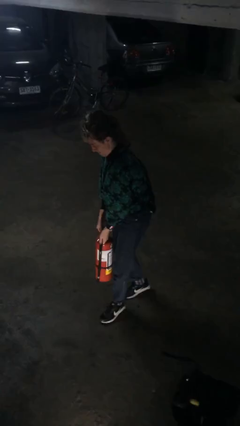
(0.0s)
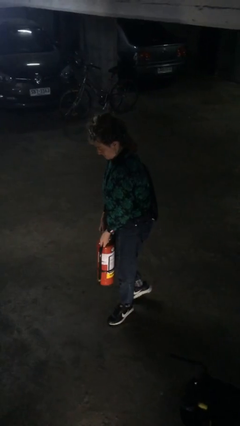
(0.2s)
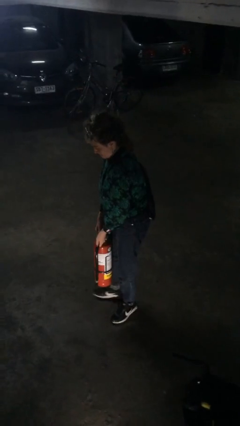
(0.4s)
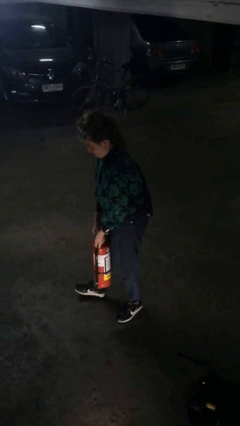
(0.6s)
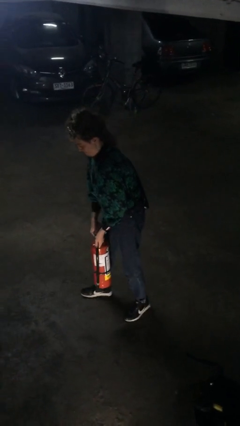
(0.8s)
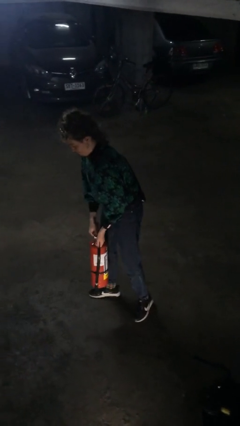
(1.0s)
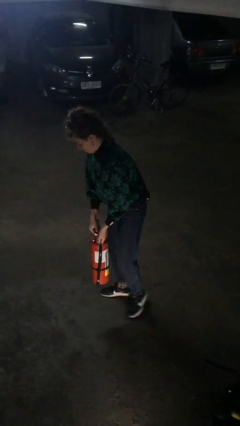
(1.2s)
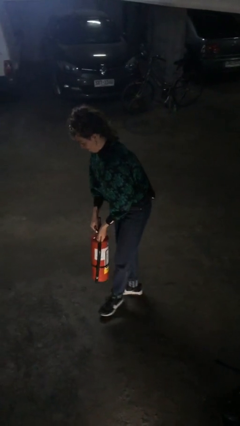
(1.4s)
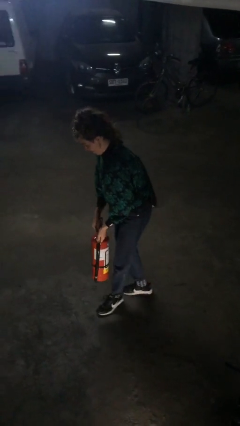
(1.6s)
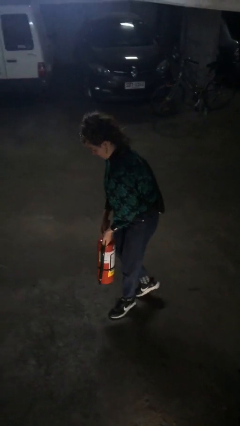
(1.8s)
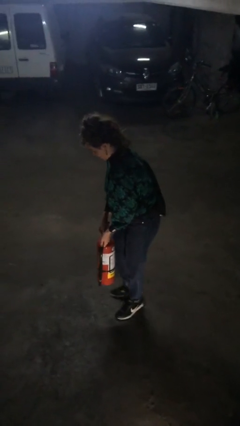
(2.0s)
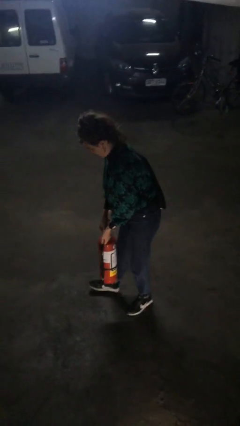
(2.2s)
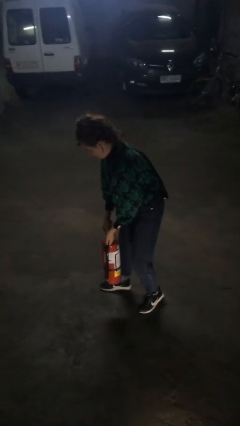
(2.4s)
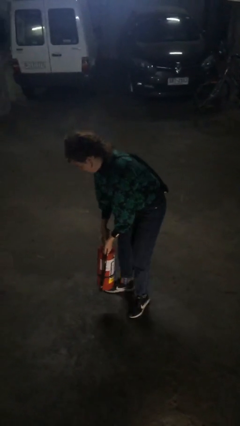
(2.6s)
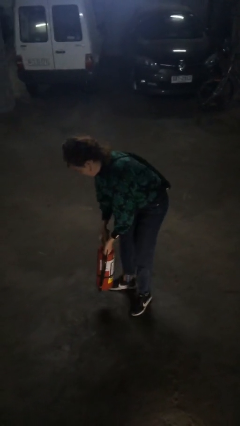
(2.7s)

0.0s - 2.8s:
person carries heavy object

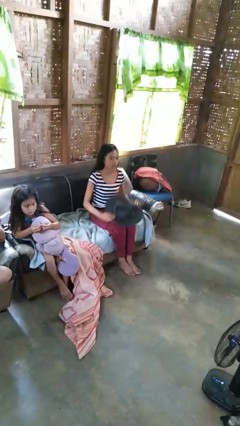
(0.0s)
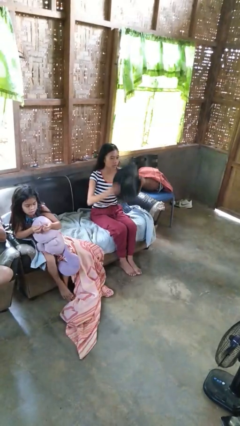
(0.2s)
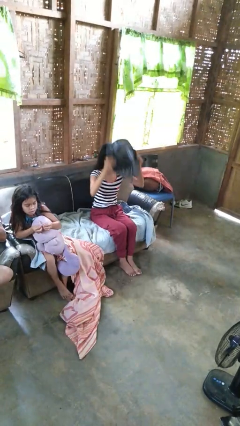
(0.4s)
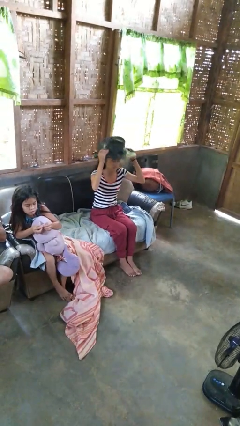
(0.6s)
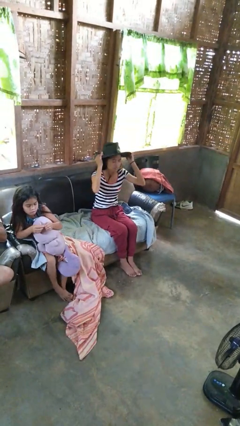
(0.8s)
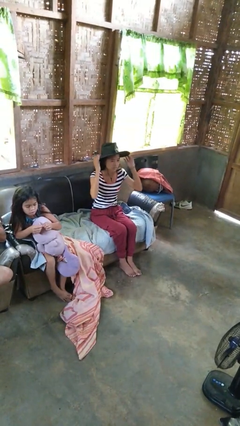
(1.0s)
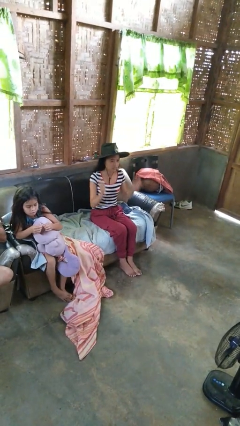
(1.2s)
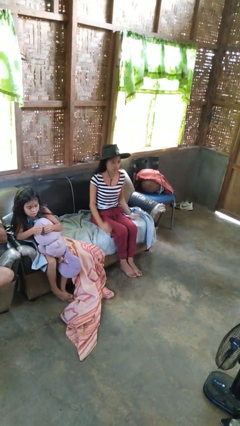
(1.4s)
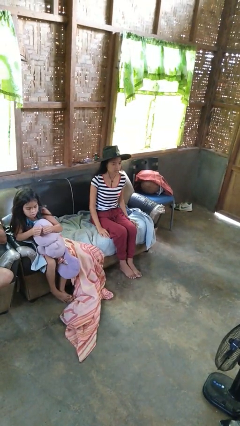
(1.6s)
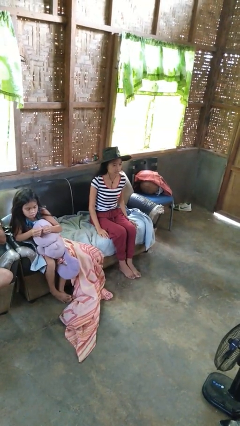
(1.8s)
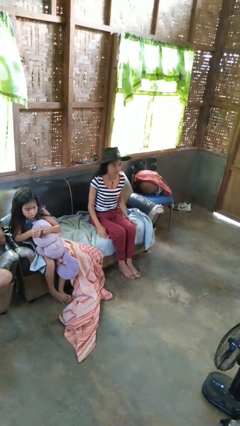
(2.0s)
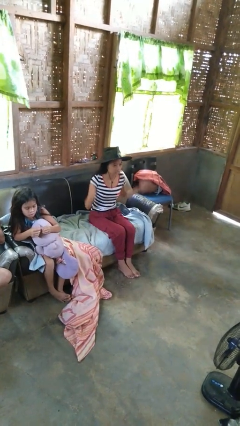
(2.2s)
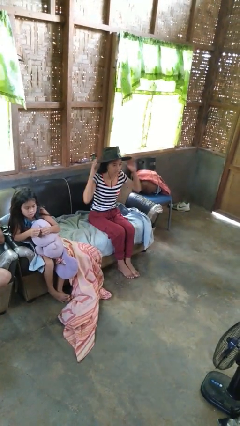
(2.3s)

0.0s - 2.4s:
person puts on hat

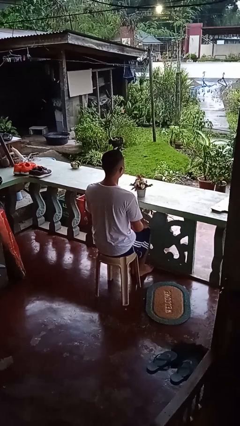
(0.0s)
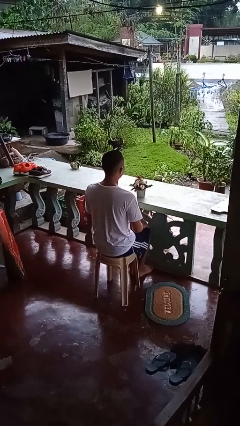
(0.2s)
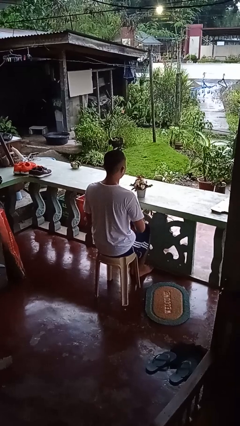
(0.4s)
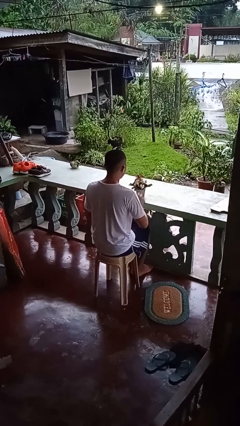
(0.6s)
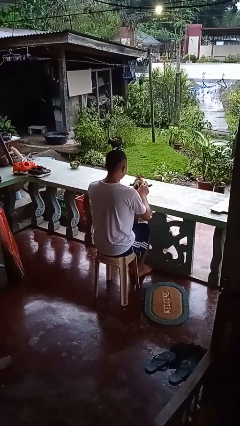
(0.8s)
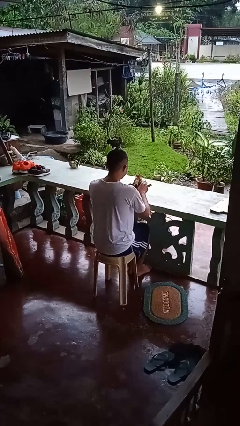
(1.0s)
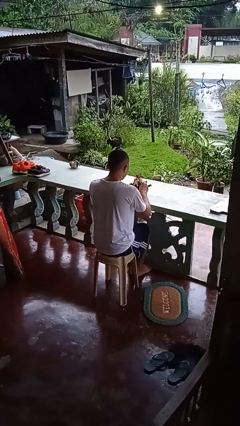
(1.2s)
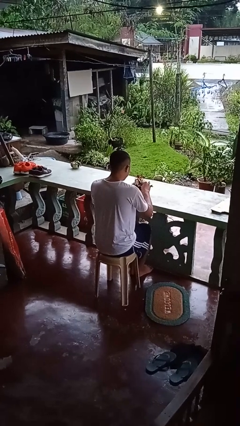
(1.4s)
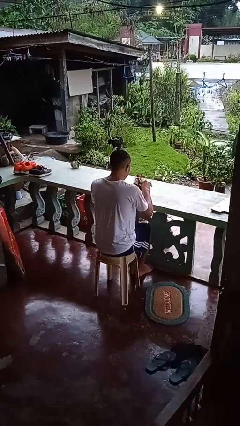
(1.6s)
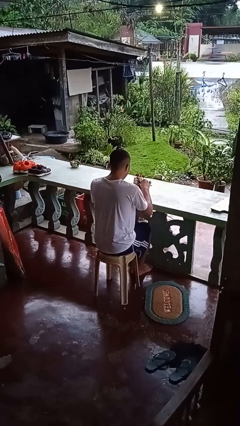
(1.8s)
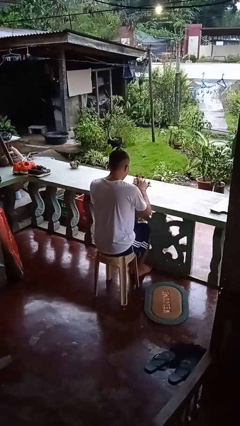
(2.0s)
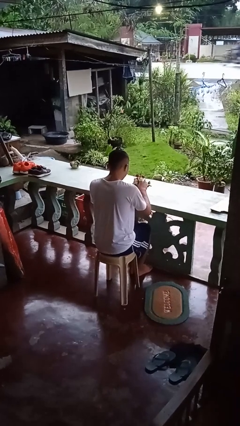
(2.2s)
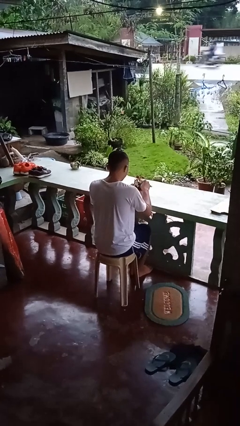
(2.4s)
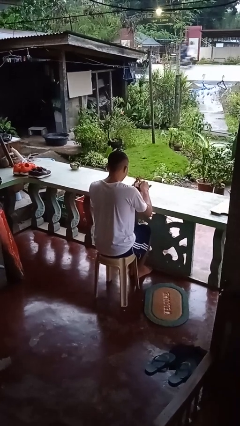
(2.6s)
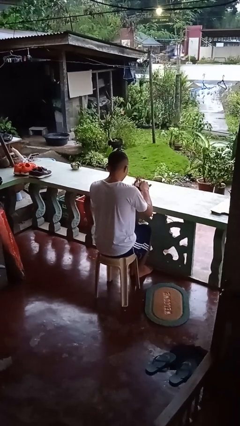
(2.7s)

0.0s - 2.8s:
person arranges flowers in vase

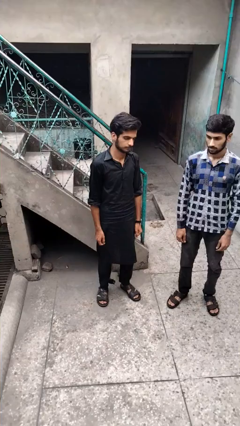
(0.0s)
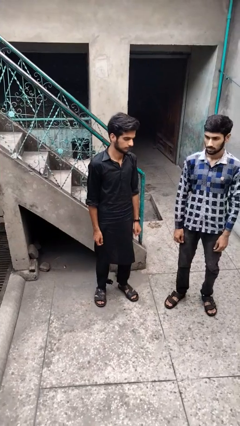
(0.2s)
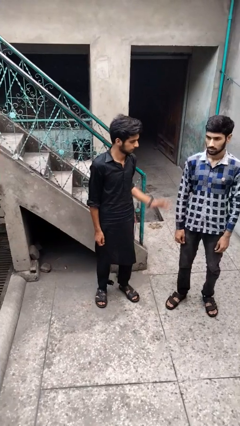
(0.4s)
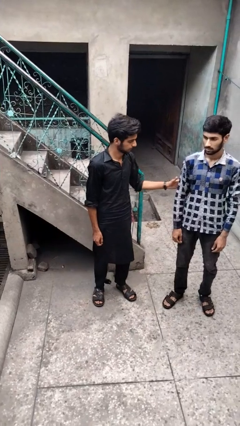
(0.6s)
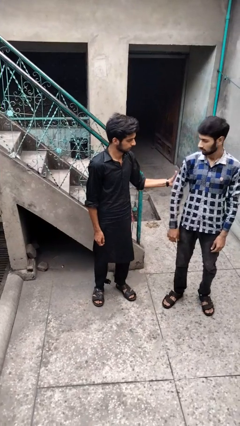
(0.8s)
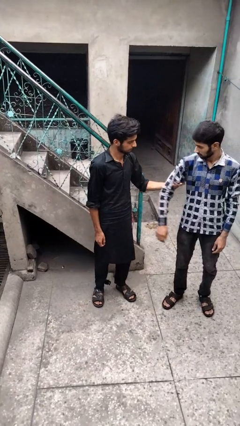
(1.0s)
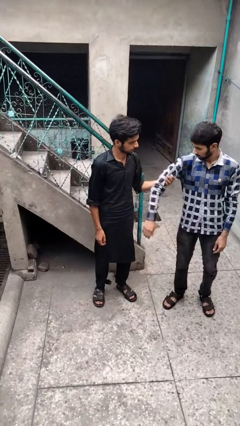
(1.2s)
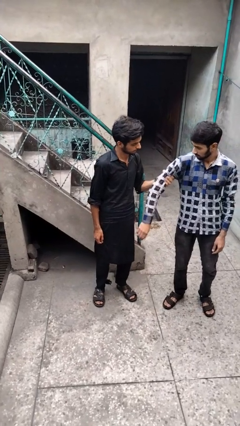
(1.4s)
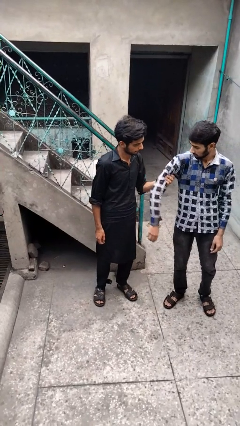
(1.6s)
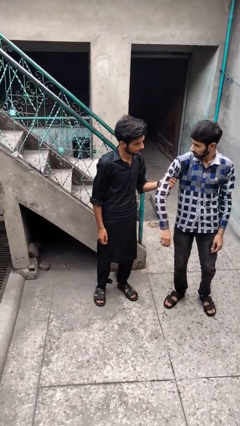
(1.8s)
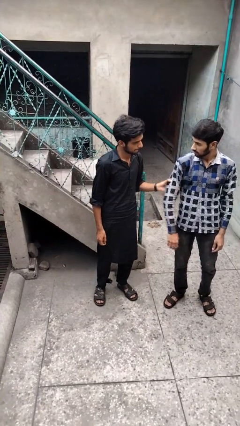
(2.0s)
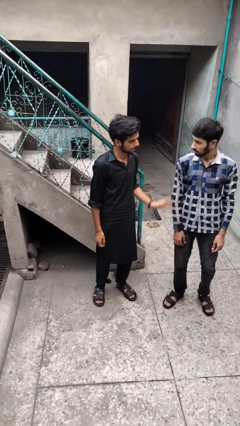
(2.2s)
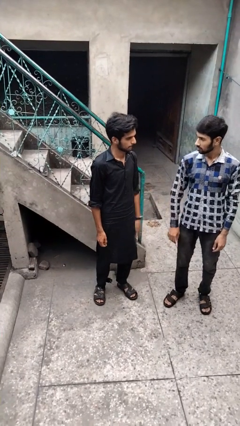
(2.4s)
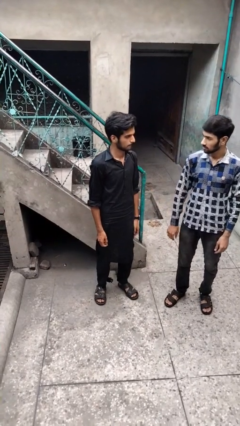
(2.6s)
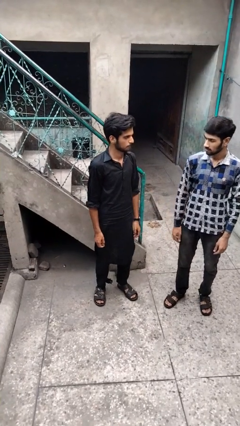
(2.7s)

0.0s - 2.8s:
person grabs person by bicep

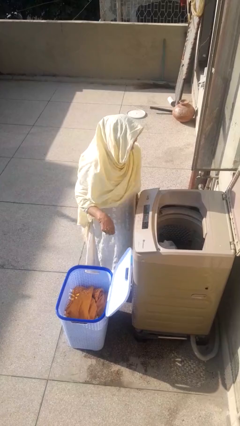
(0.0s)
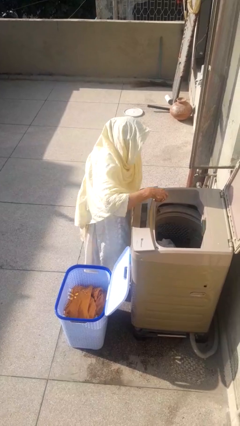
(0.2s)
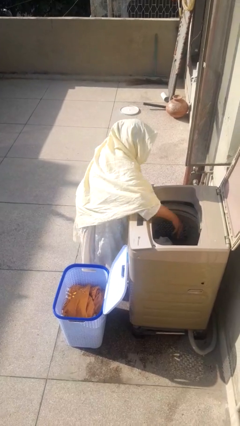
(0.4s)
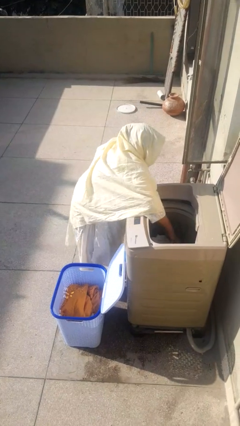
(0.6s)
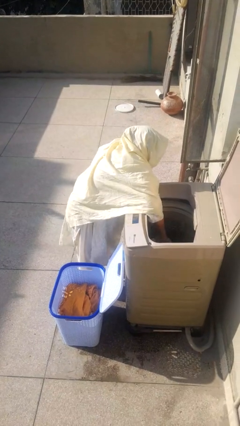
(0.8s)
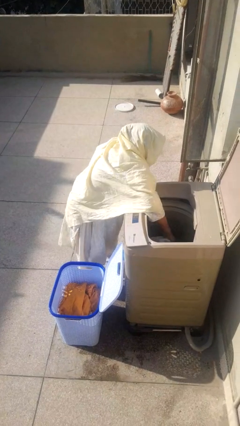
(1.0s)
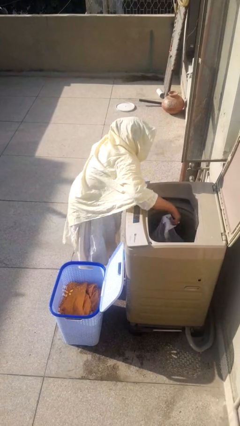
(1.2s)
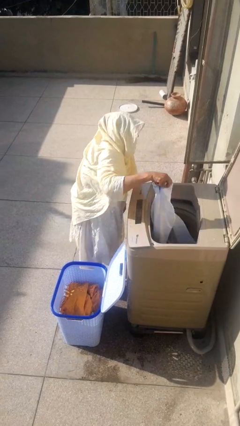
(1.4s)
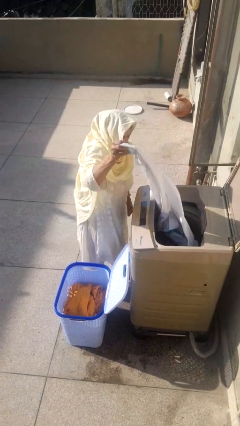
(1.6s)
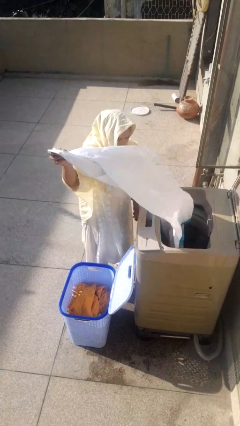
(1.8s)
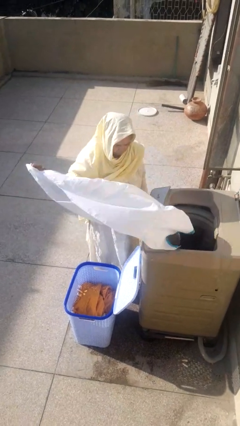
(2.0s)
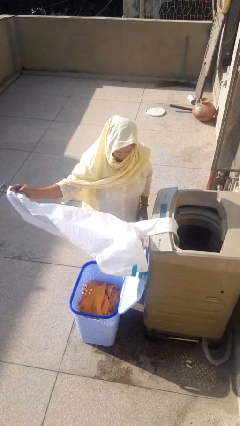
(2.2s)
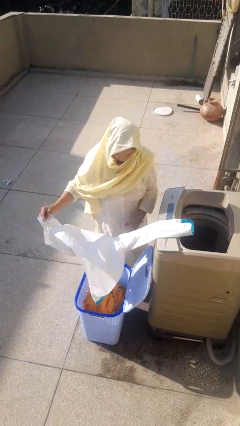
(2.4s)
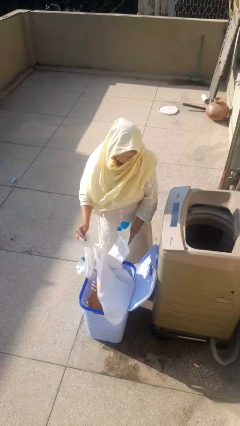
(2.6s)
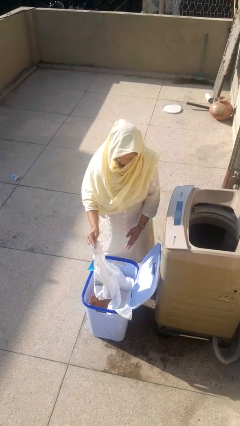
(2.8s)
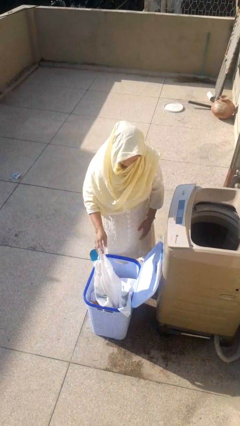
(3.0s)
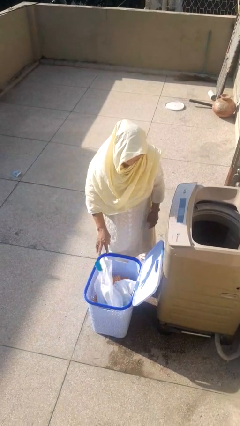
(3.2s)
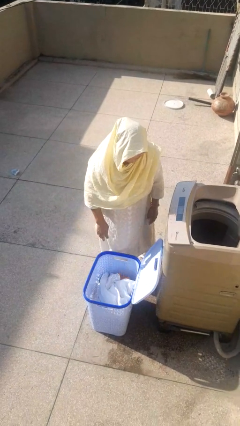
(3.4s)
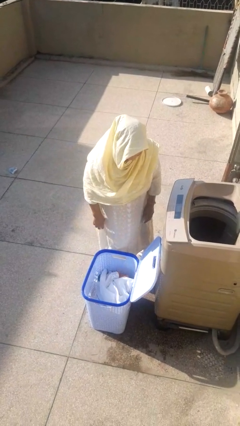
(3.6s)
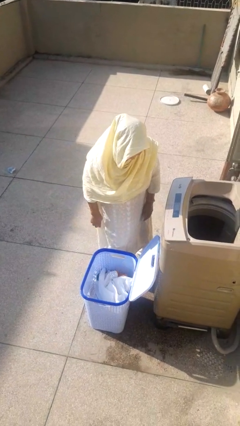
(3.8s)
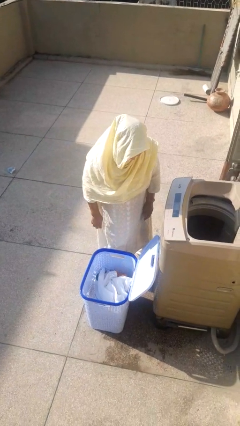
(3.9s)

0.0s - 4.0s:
person unloads clotheswasher

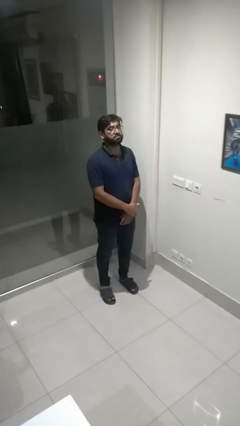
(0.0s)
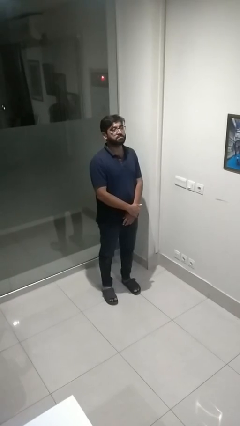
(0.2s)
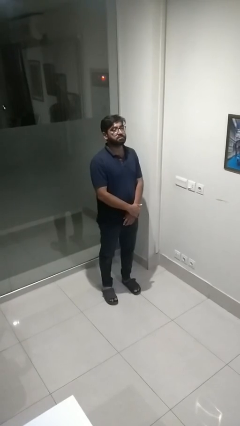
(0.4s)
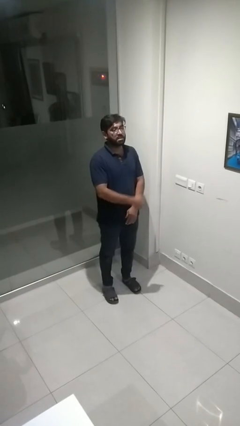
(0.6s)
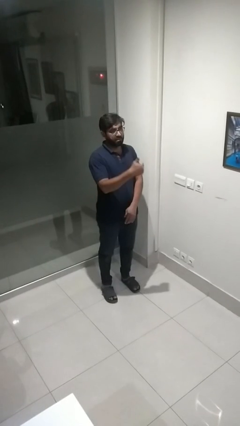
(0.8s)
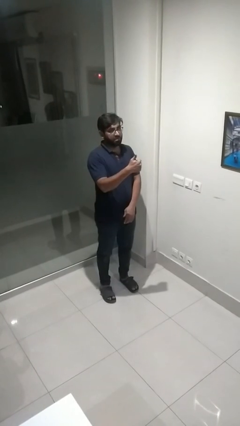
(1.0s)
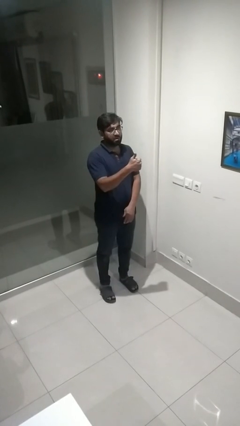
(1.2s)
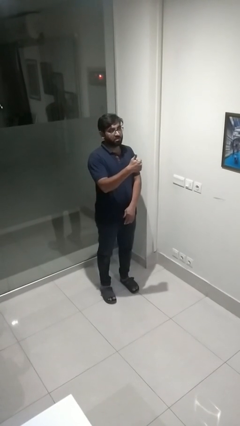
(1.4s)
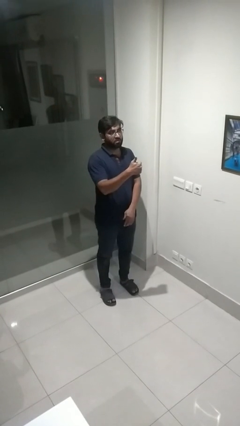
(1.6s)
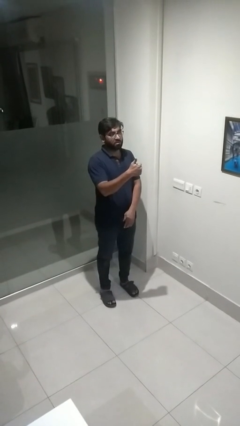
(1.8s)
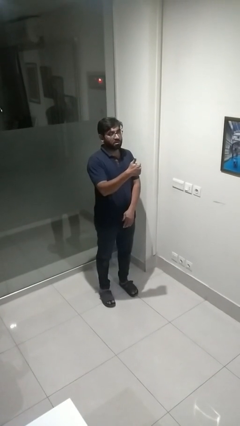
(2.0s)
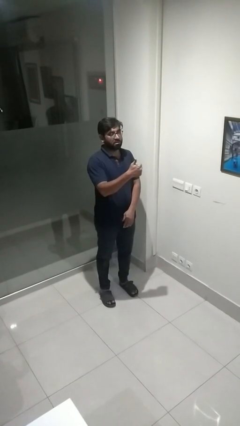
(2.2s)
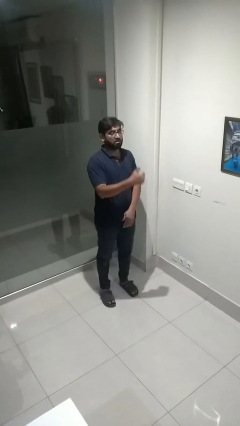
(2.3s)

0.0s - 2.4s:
person gestures thumbs up

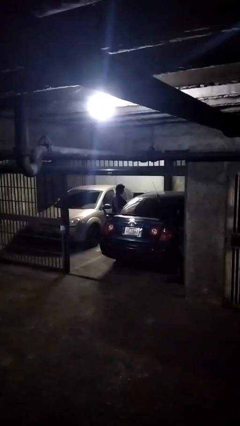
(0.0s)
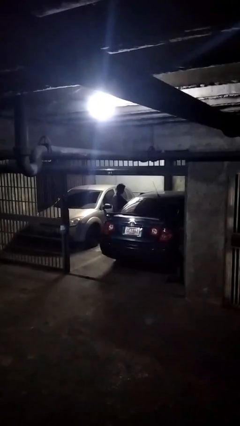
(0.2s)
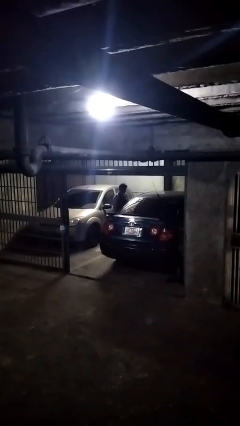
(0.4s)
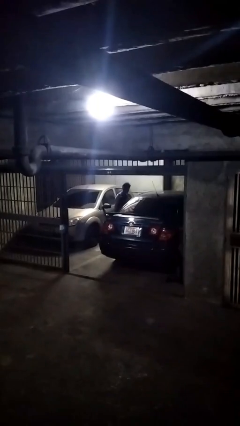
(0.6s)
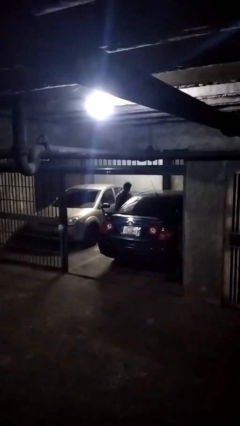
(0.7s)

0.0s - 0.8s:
person closes car door
